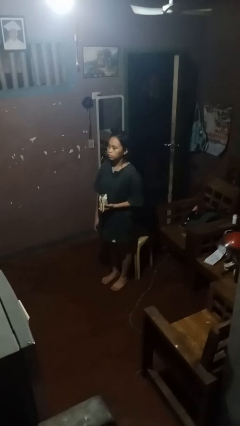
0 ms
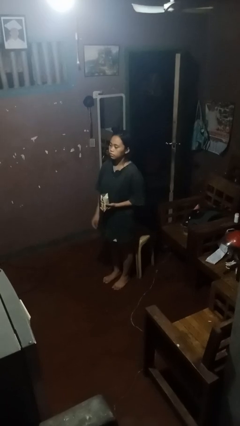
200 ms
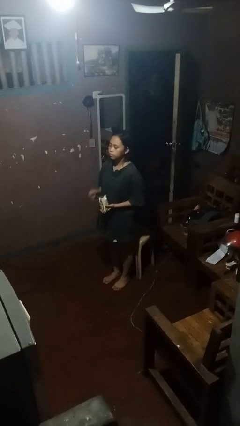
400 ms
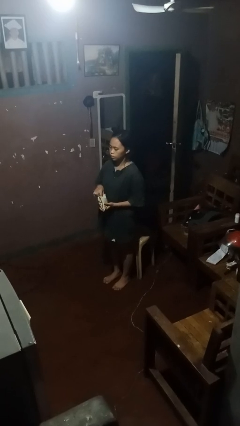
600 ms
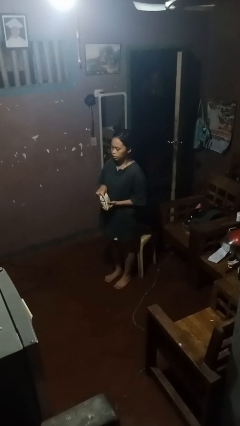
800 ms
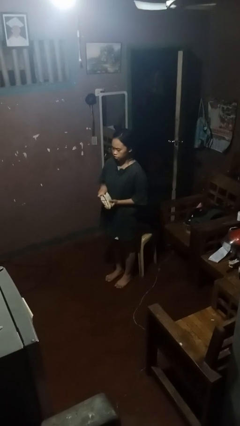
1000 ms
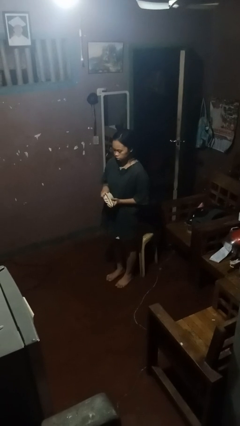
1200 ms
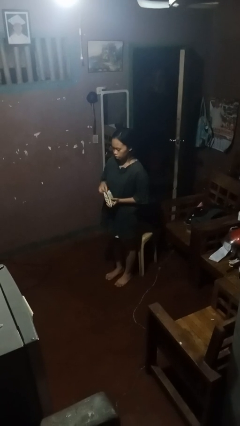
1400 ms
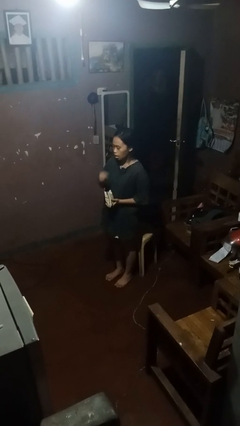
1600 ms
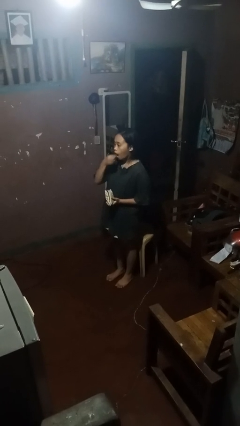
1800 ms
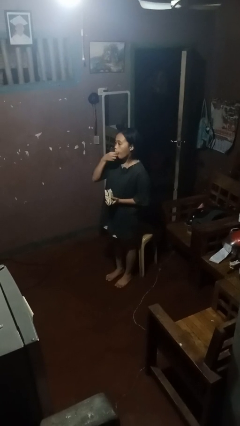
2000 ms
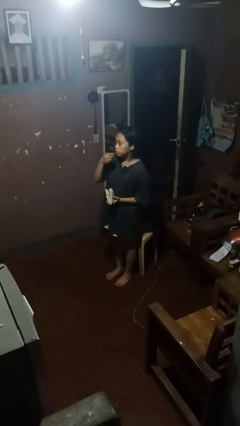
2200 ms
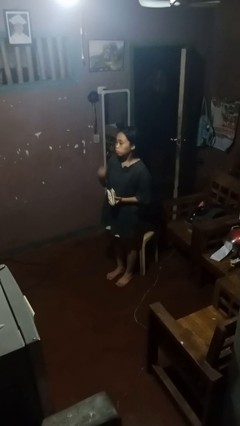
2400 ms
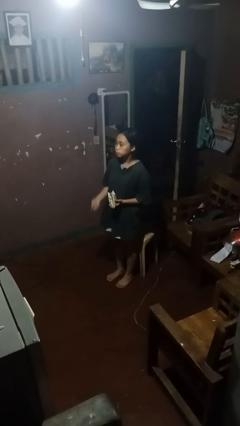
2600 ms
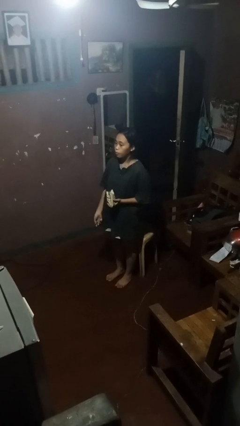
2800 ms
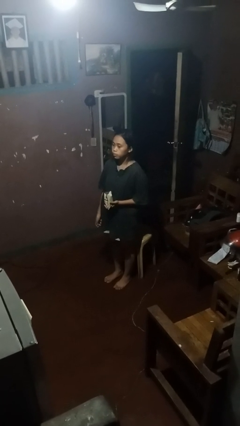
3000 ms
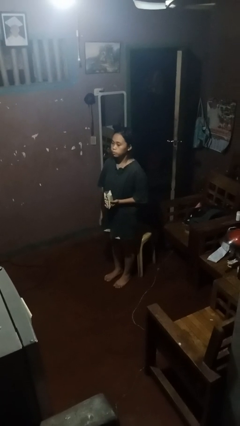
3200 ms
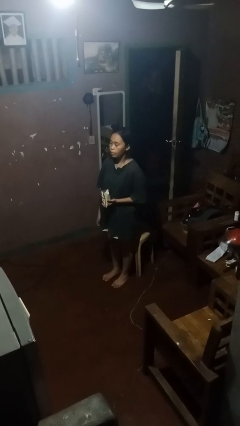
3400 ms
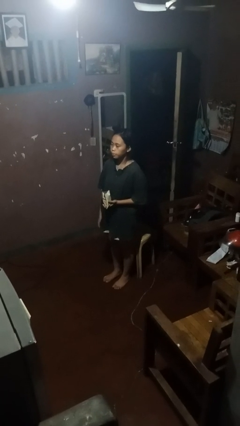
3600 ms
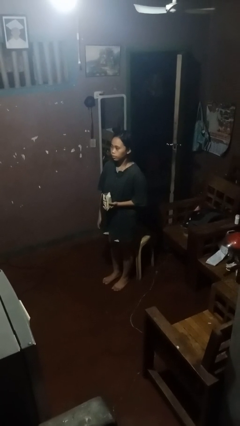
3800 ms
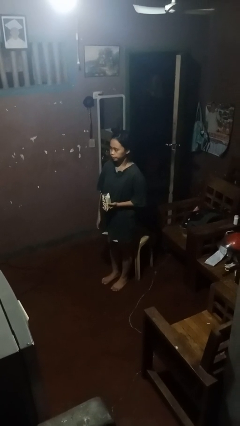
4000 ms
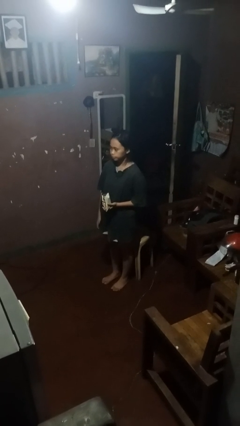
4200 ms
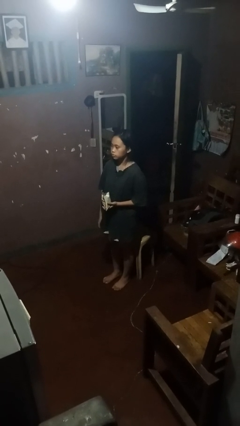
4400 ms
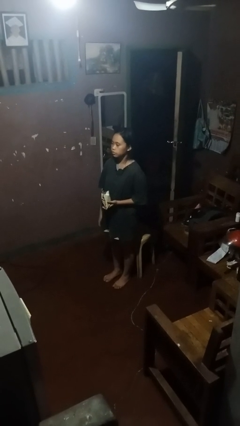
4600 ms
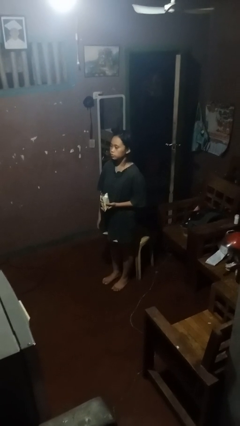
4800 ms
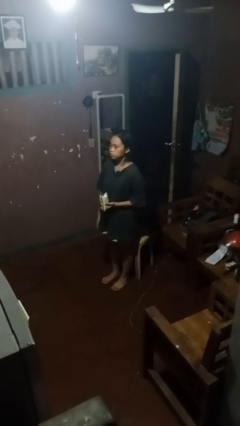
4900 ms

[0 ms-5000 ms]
person eats snack from bag

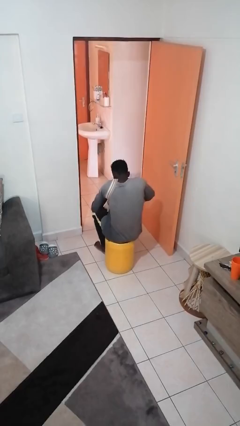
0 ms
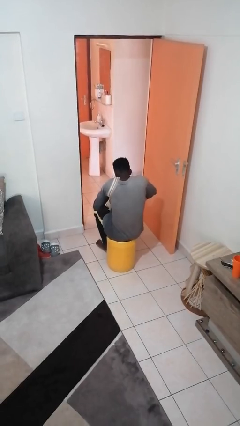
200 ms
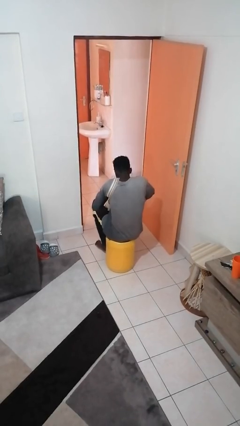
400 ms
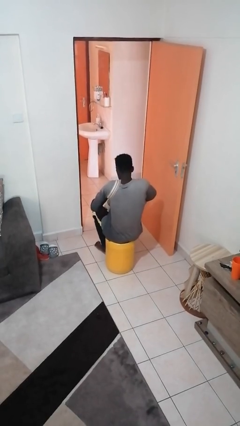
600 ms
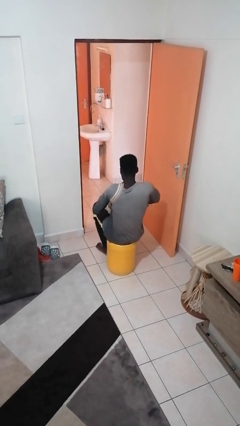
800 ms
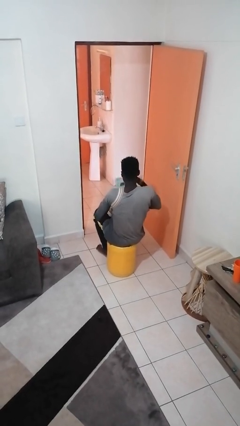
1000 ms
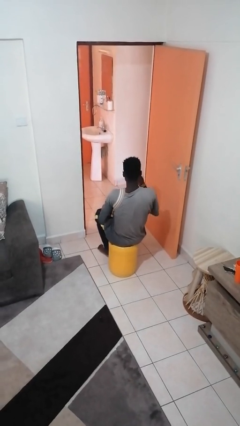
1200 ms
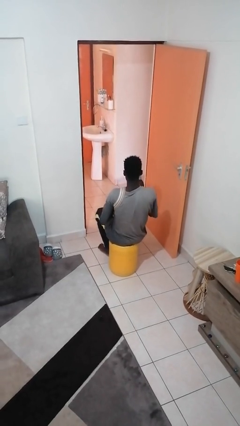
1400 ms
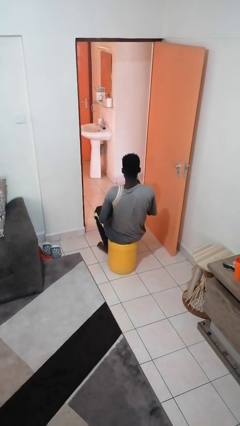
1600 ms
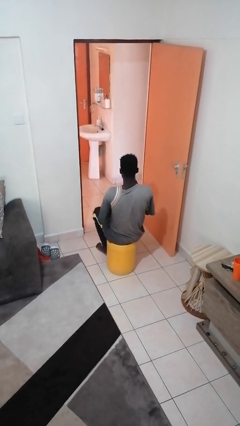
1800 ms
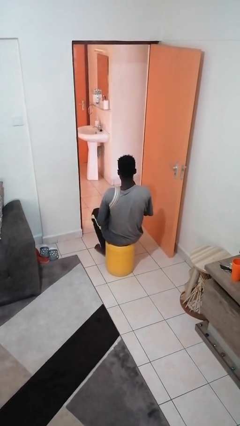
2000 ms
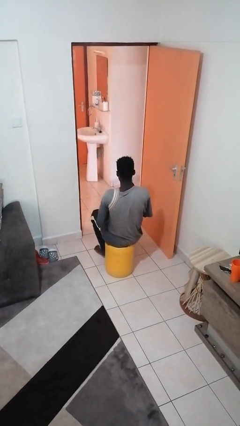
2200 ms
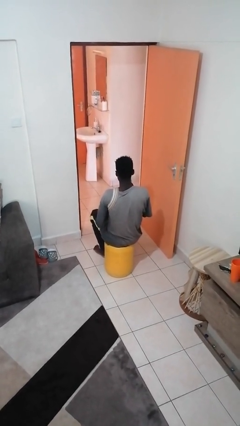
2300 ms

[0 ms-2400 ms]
person takes object from purse

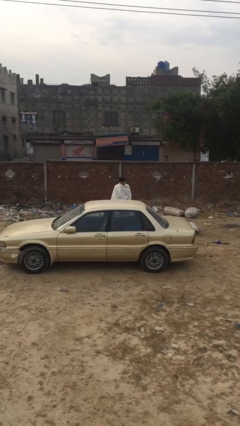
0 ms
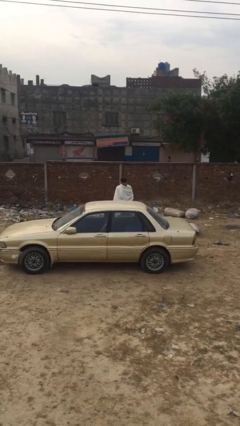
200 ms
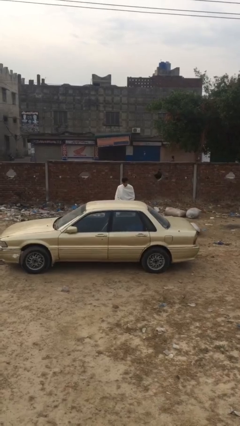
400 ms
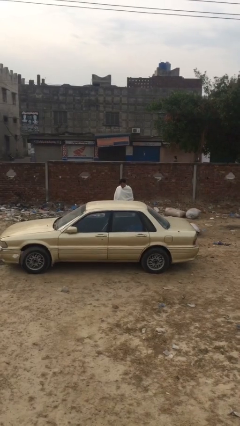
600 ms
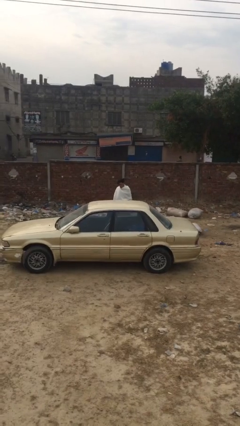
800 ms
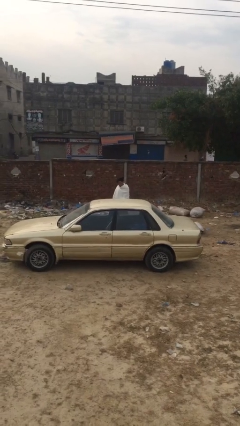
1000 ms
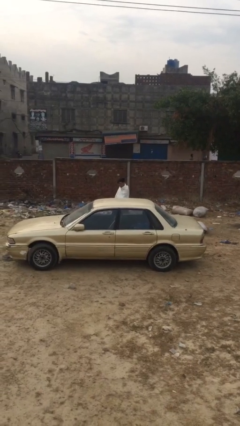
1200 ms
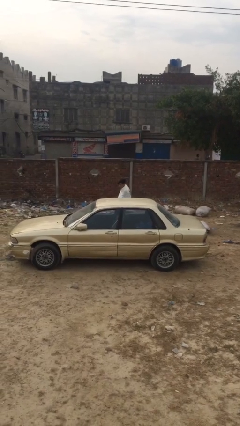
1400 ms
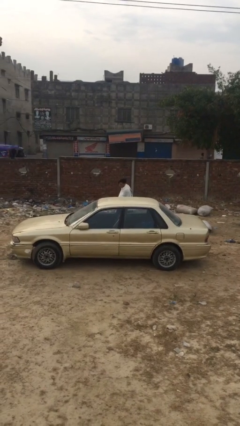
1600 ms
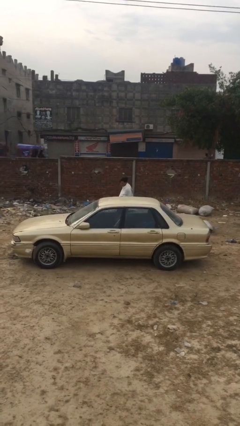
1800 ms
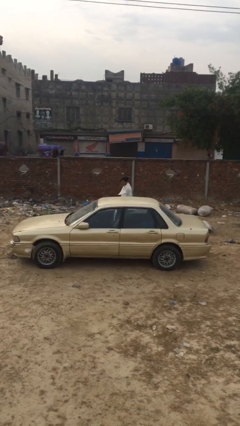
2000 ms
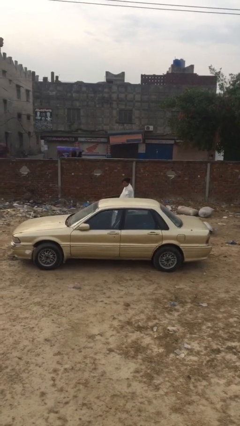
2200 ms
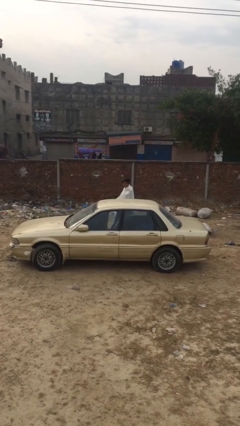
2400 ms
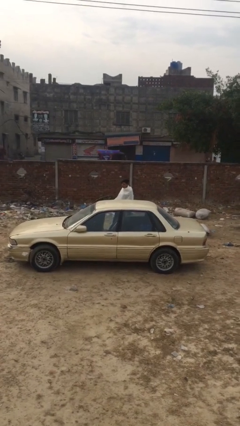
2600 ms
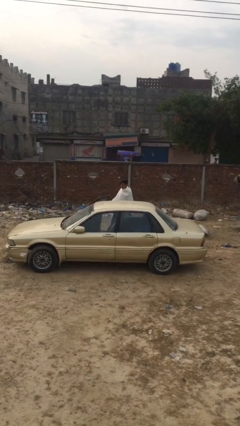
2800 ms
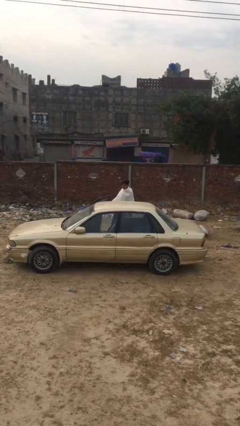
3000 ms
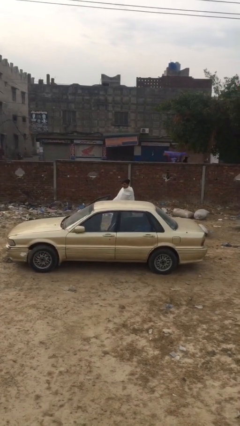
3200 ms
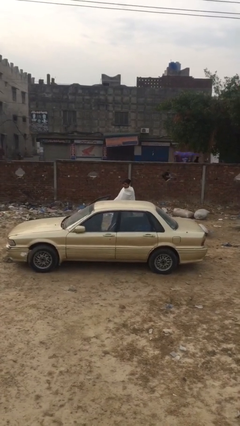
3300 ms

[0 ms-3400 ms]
person opens car door

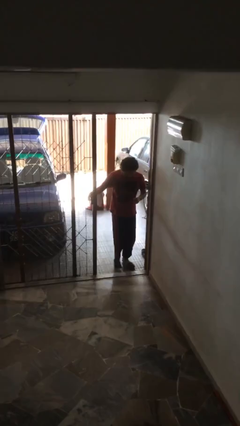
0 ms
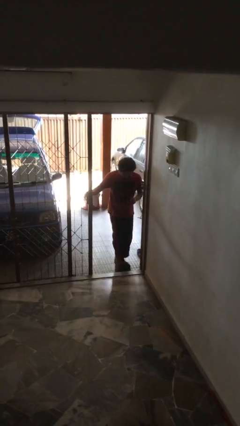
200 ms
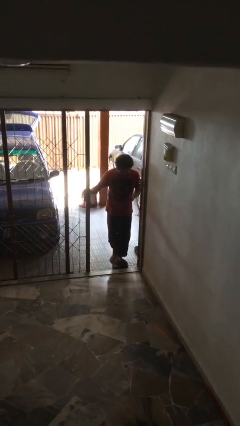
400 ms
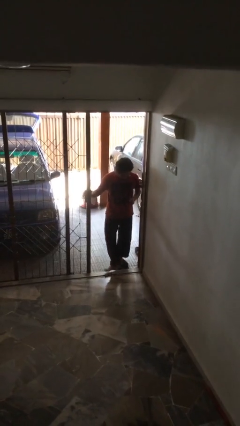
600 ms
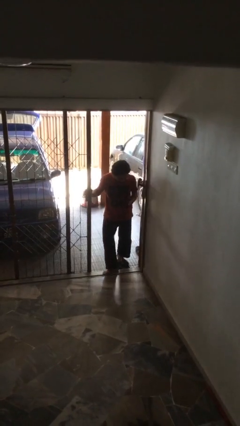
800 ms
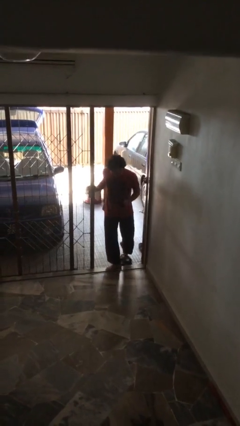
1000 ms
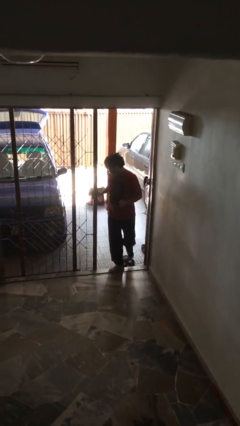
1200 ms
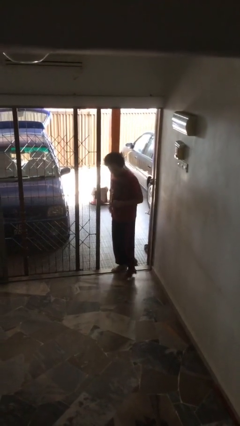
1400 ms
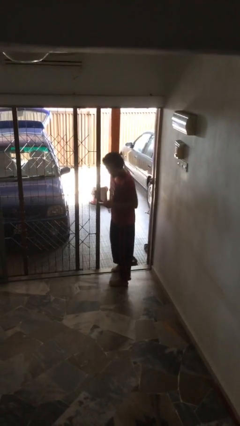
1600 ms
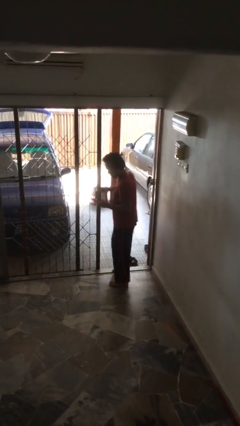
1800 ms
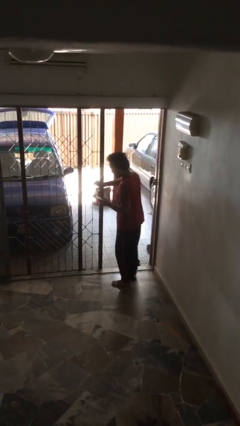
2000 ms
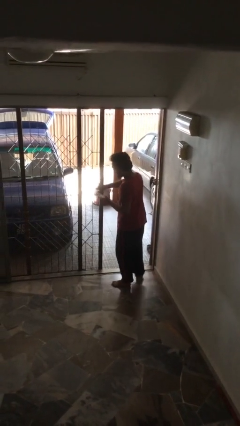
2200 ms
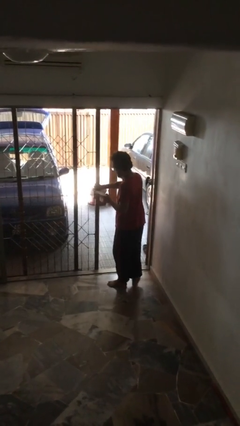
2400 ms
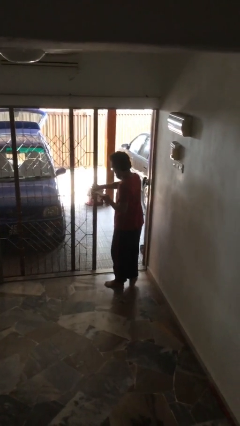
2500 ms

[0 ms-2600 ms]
person enters scene through structure

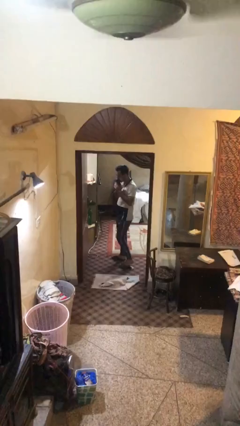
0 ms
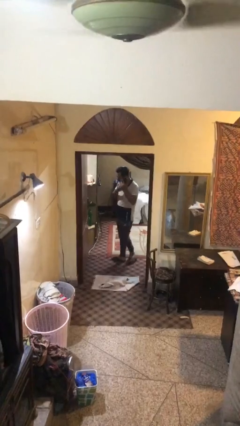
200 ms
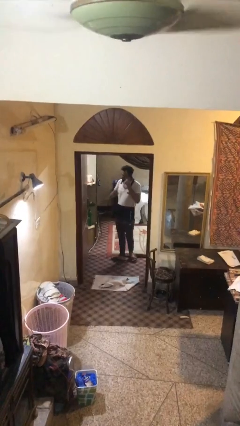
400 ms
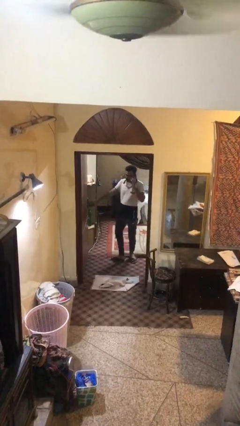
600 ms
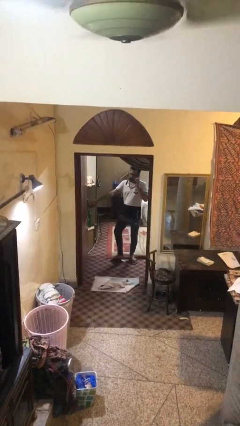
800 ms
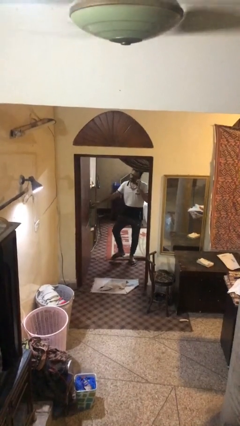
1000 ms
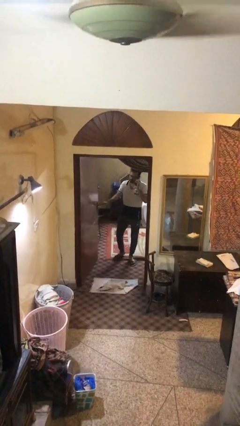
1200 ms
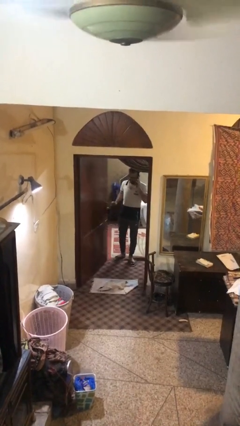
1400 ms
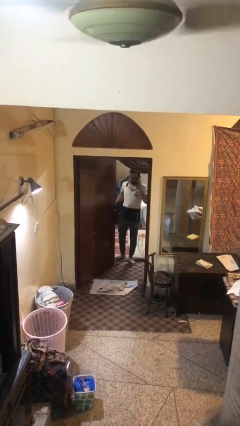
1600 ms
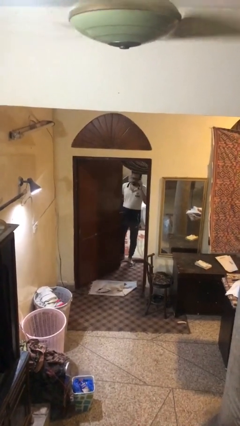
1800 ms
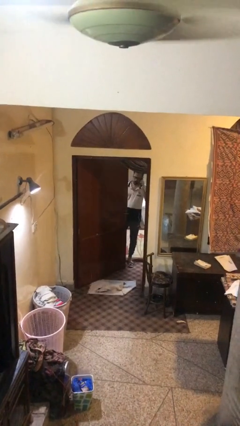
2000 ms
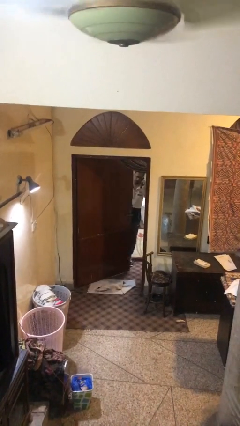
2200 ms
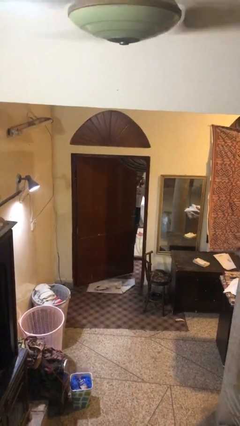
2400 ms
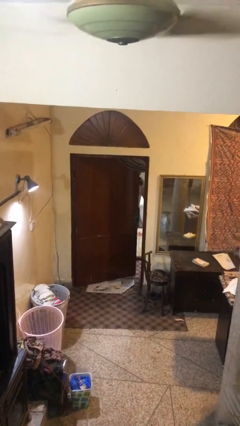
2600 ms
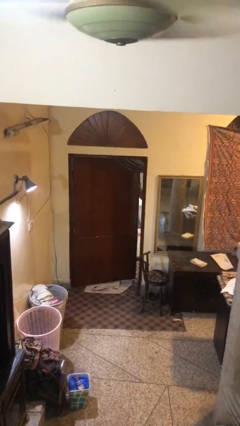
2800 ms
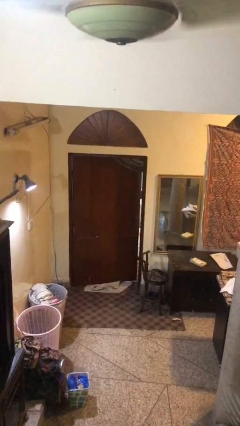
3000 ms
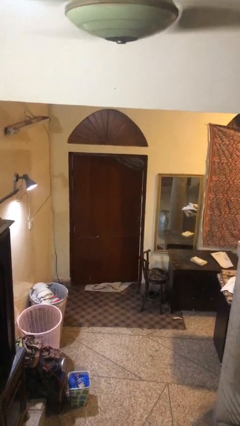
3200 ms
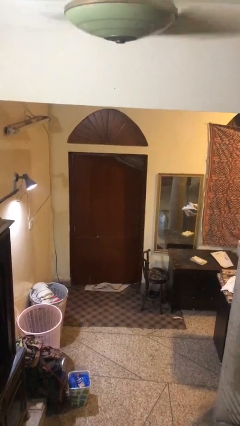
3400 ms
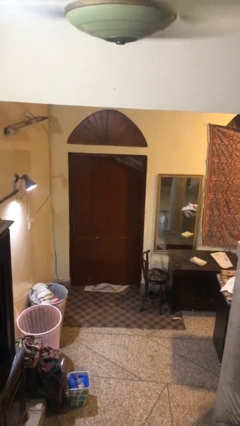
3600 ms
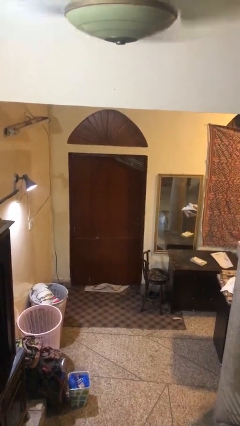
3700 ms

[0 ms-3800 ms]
person closes facility door

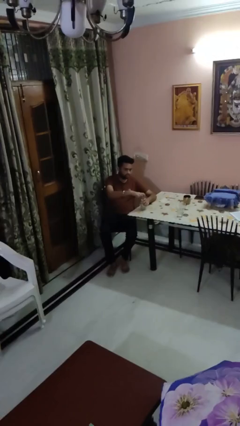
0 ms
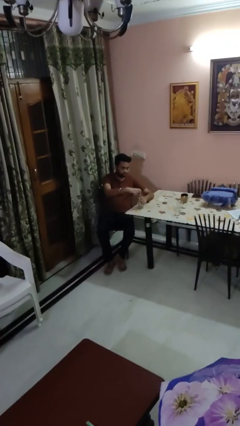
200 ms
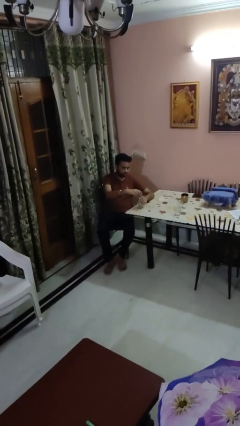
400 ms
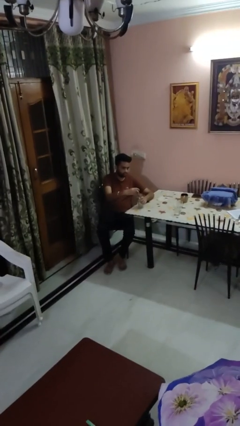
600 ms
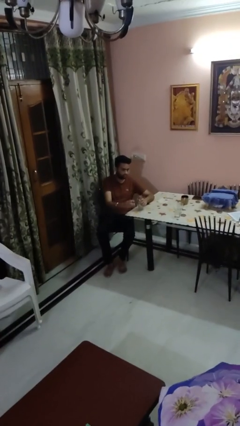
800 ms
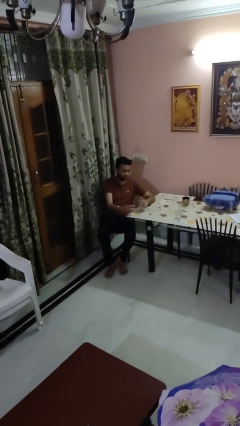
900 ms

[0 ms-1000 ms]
person unscrews lid from bottle
